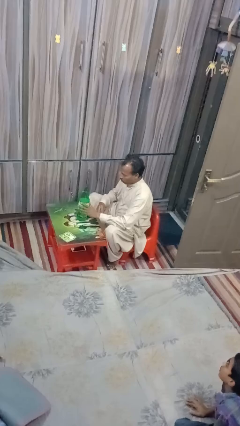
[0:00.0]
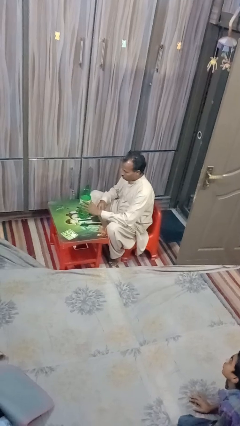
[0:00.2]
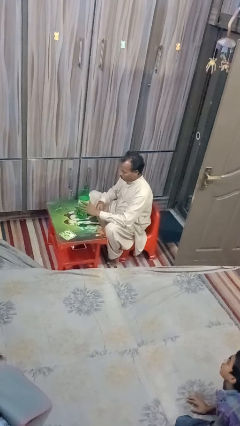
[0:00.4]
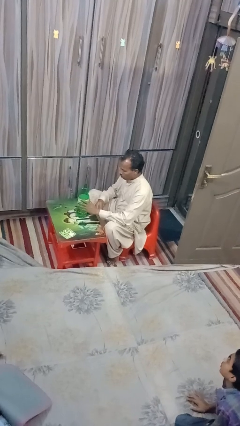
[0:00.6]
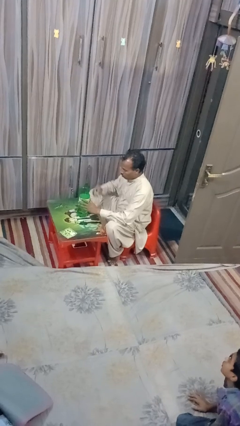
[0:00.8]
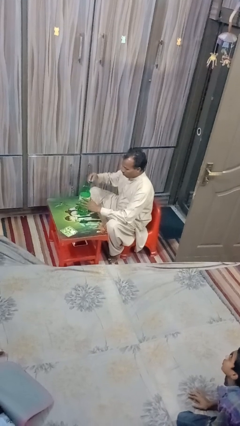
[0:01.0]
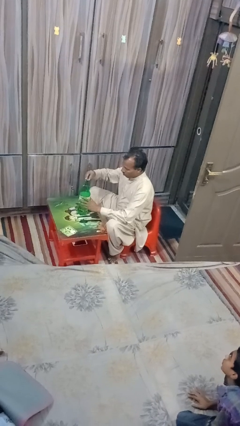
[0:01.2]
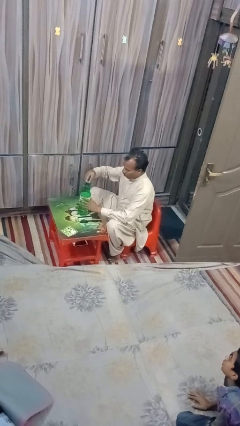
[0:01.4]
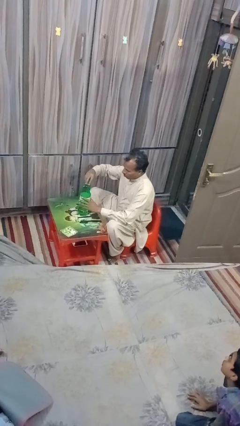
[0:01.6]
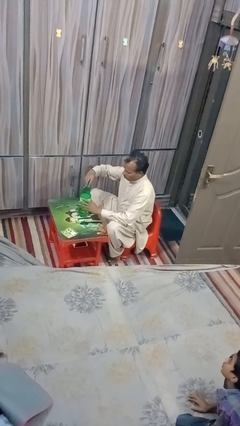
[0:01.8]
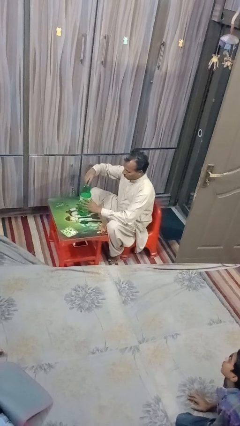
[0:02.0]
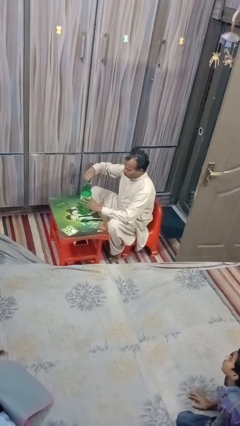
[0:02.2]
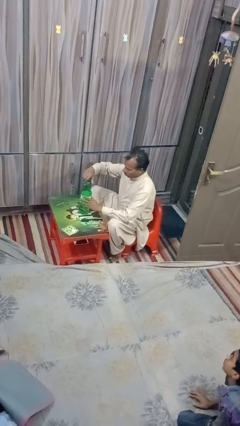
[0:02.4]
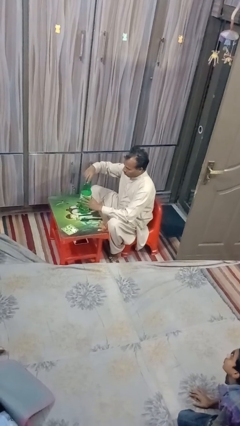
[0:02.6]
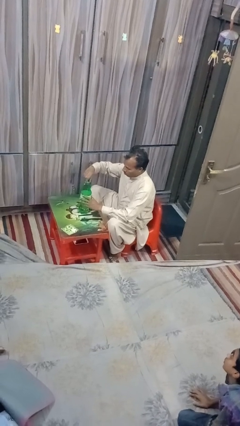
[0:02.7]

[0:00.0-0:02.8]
person screws lid to bottle

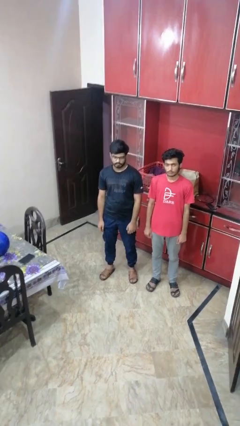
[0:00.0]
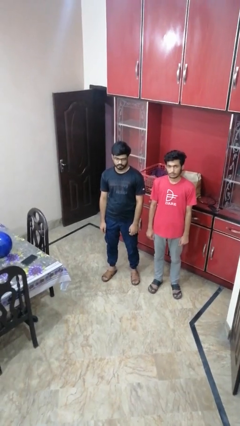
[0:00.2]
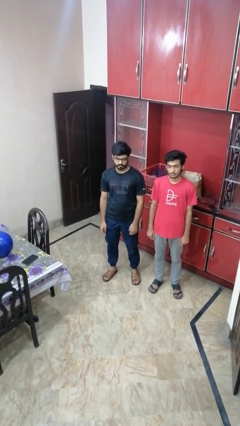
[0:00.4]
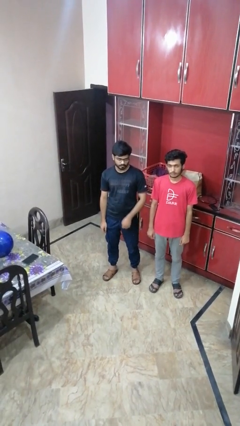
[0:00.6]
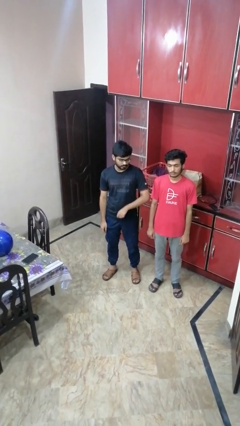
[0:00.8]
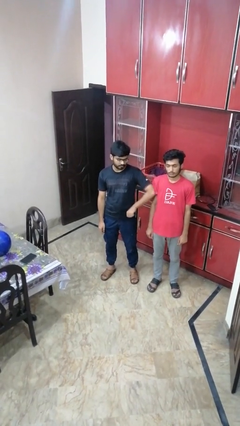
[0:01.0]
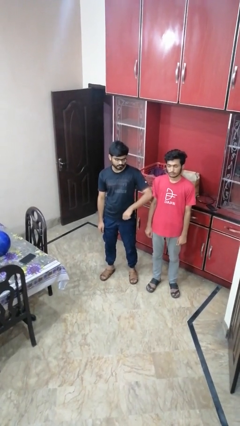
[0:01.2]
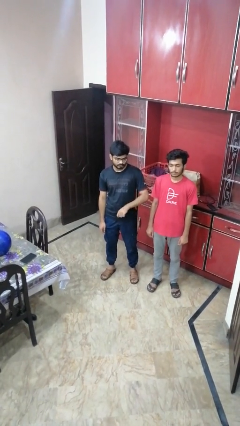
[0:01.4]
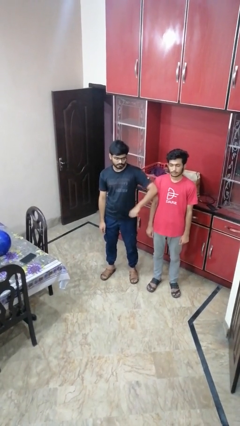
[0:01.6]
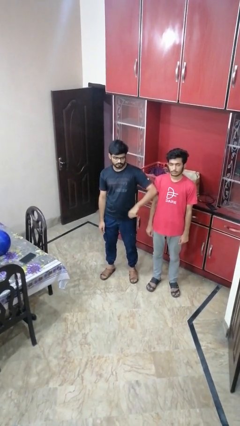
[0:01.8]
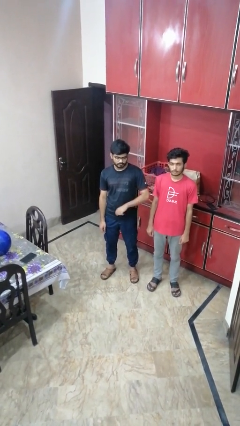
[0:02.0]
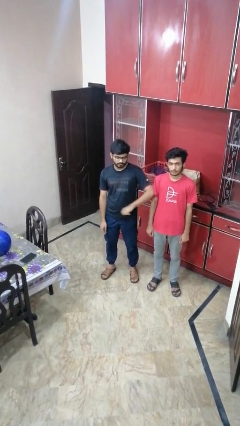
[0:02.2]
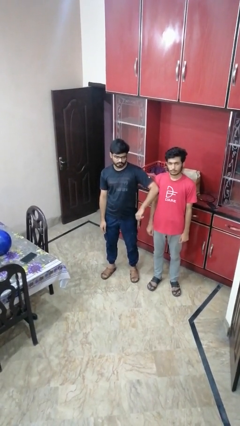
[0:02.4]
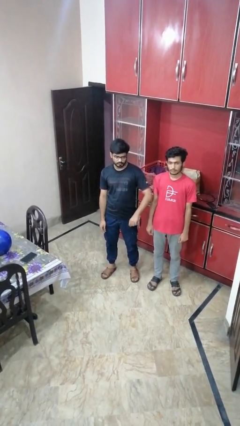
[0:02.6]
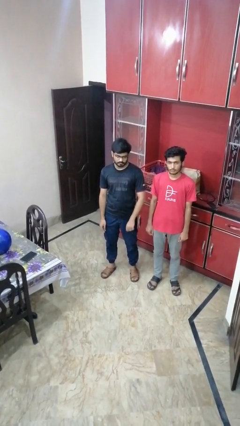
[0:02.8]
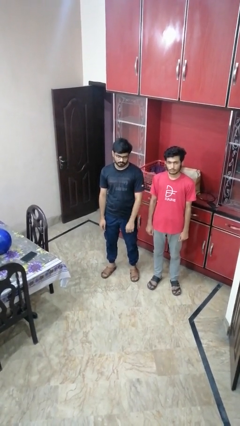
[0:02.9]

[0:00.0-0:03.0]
person nudges person with elbow

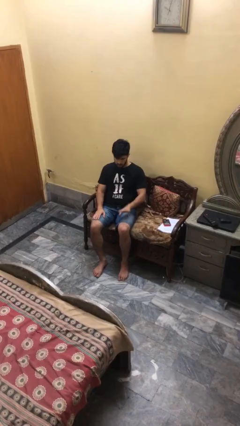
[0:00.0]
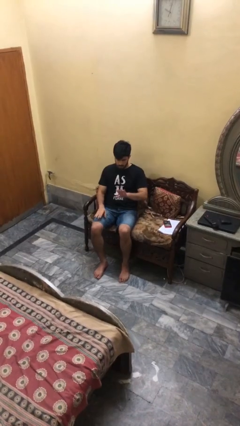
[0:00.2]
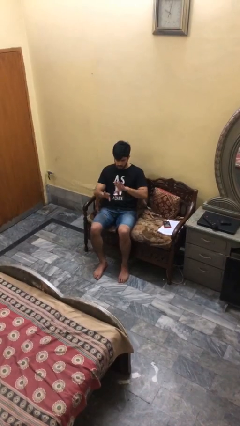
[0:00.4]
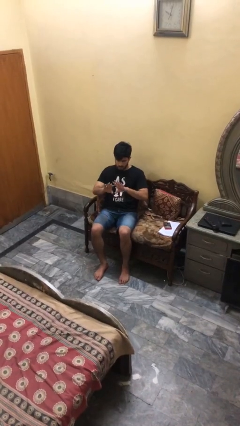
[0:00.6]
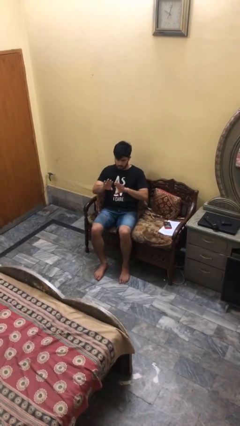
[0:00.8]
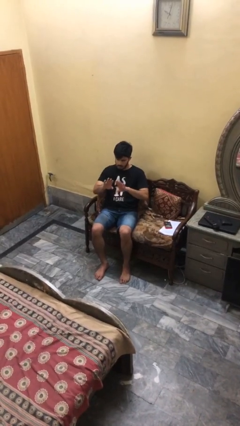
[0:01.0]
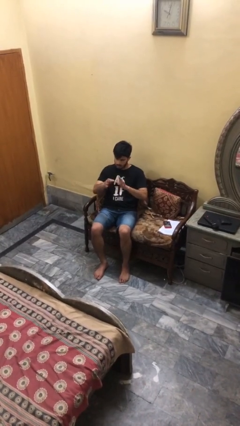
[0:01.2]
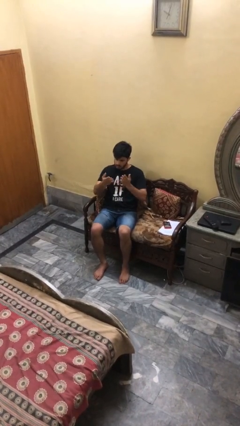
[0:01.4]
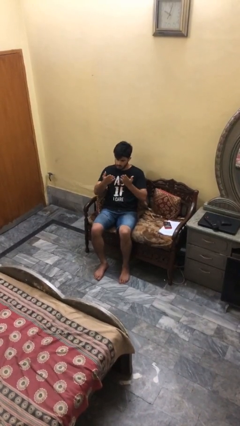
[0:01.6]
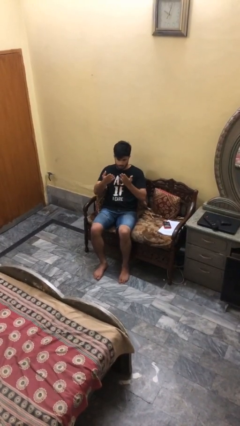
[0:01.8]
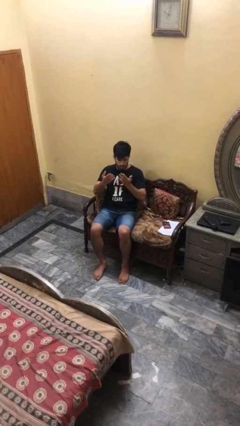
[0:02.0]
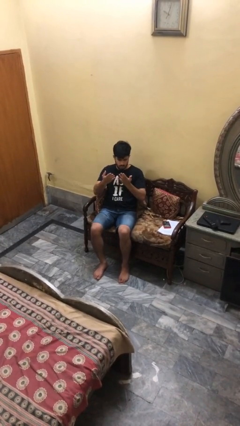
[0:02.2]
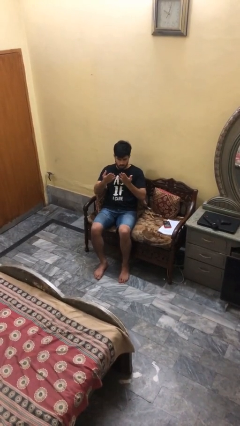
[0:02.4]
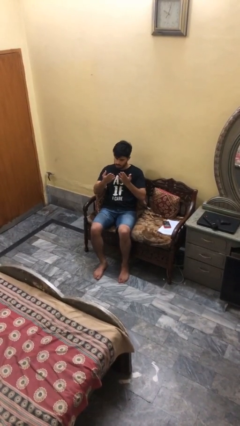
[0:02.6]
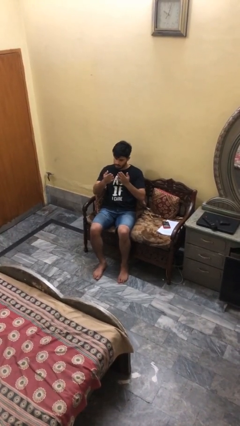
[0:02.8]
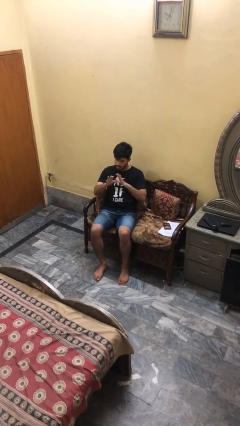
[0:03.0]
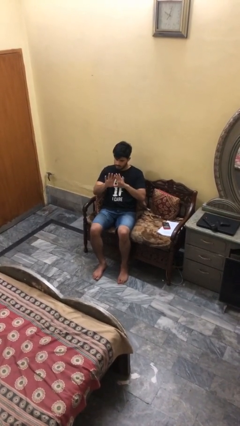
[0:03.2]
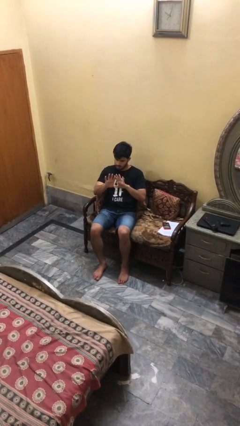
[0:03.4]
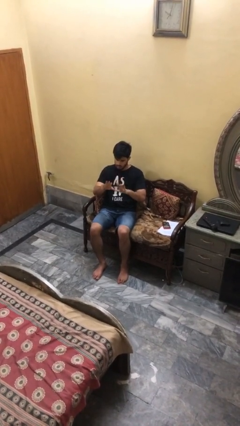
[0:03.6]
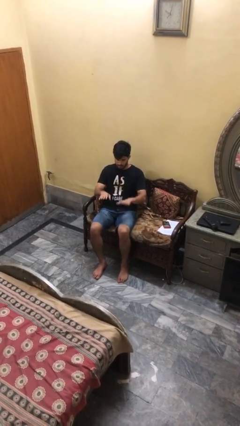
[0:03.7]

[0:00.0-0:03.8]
person looks at hands in lap

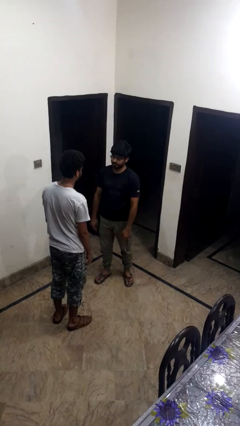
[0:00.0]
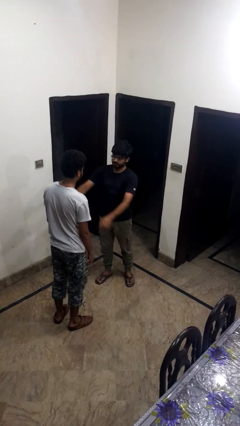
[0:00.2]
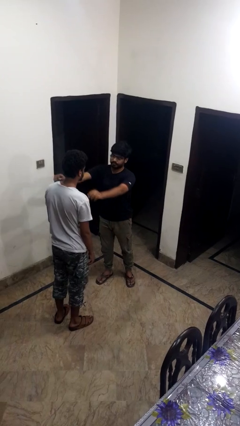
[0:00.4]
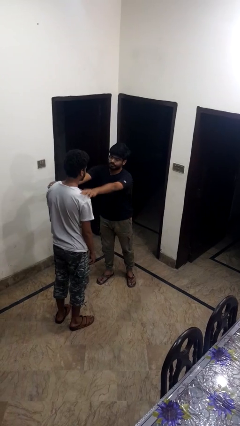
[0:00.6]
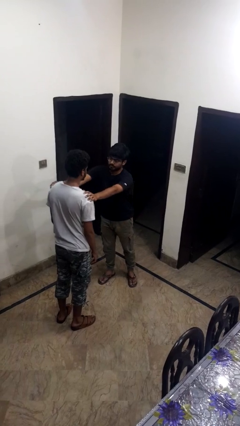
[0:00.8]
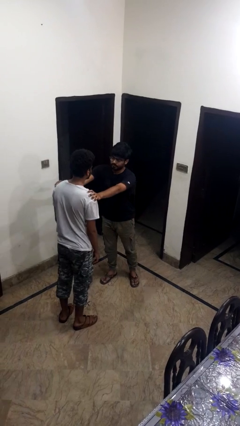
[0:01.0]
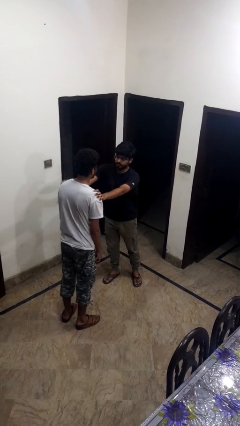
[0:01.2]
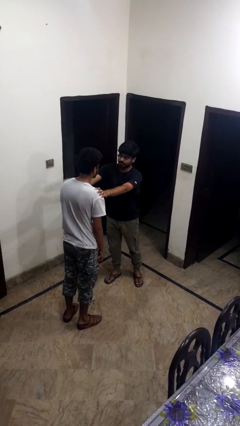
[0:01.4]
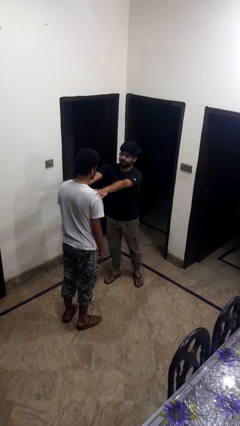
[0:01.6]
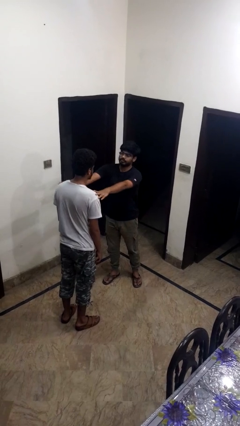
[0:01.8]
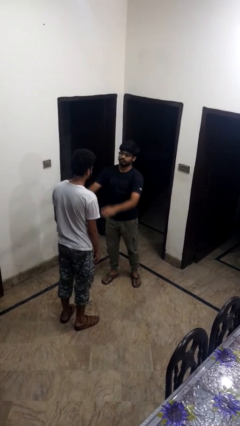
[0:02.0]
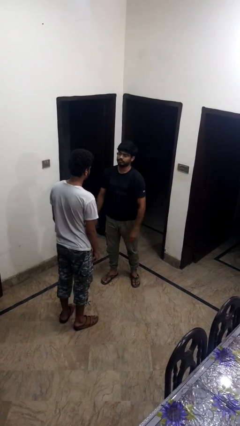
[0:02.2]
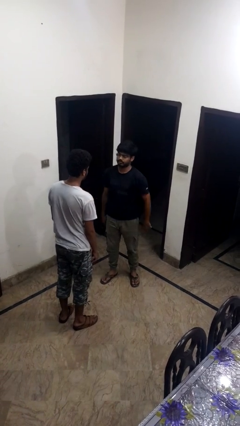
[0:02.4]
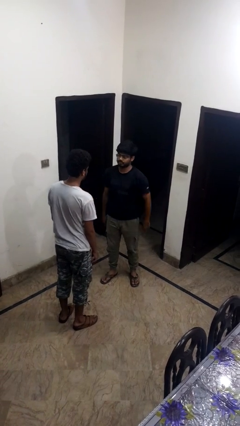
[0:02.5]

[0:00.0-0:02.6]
person kisses cheek of person

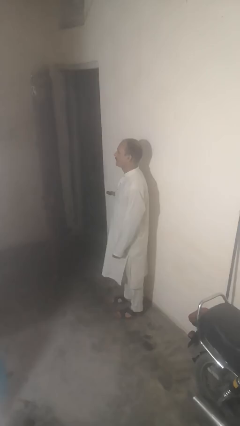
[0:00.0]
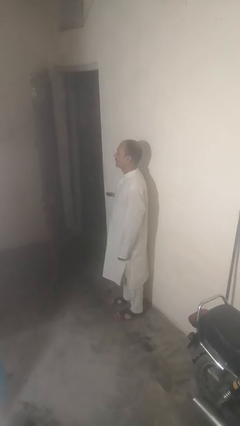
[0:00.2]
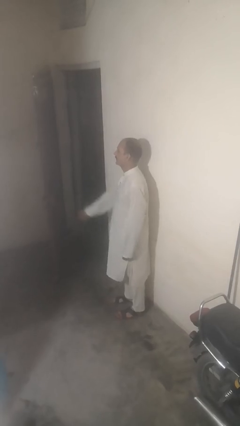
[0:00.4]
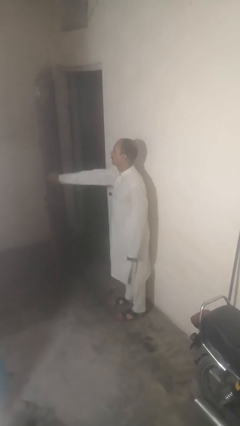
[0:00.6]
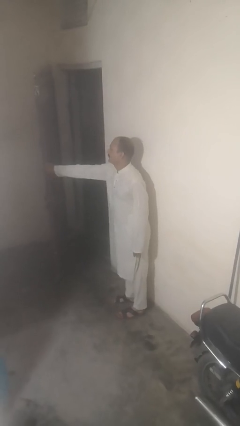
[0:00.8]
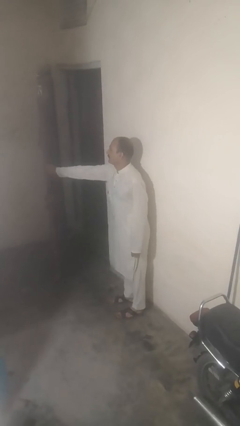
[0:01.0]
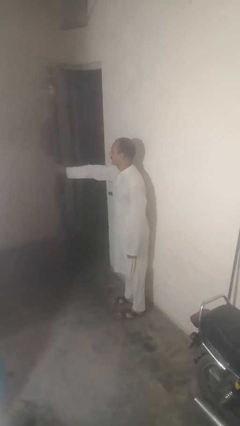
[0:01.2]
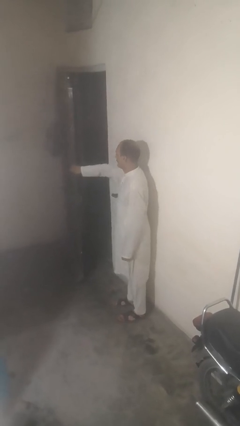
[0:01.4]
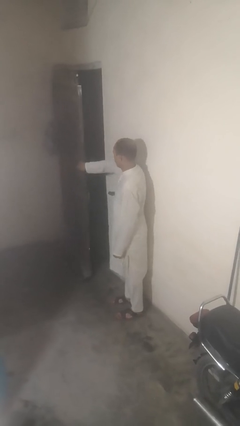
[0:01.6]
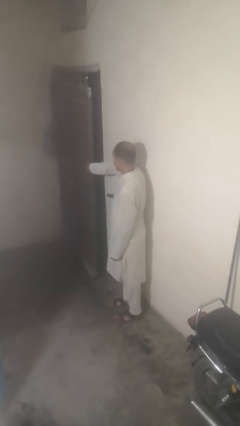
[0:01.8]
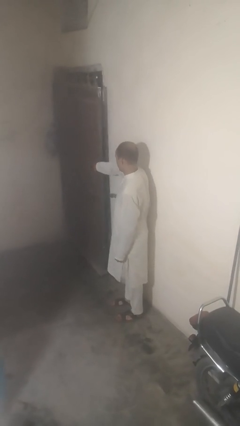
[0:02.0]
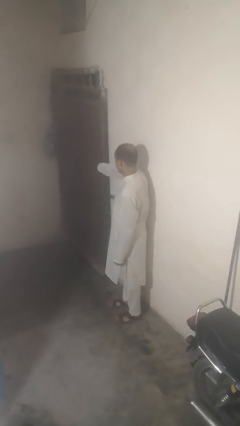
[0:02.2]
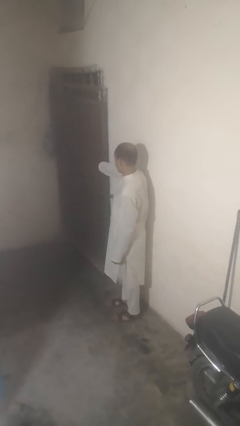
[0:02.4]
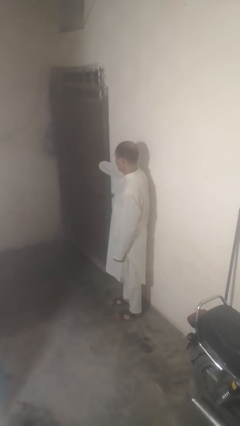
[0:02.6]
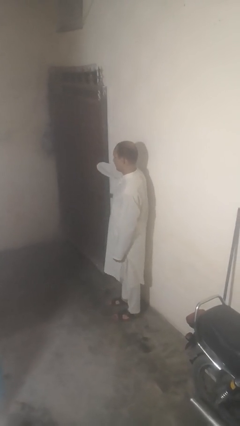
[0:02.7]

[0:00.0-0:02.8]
person closes gate

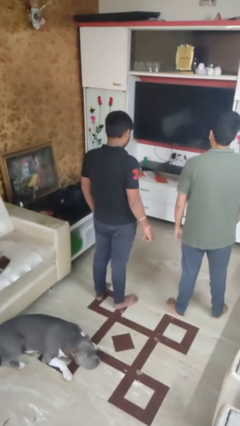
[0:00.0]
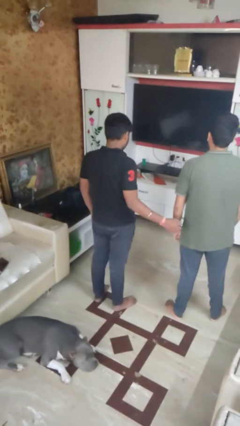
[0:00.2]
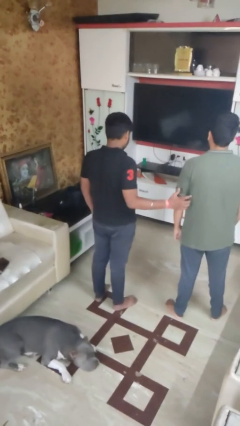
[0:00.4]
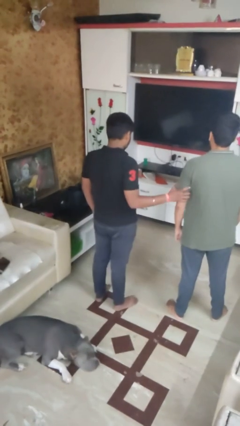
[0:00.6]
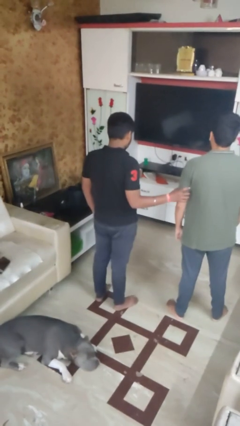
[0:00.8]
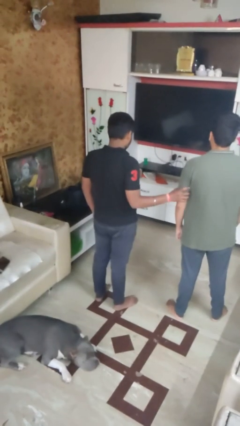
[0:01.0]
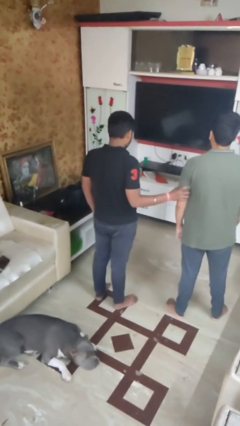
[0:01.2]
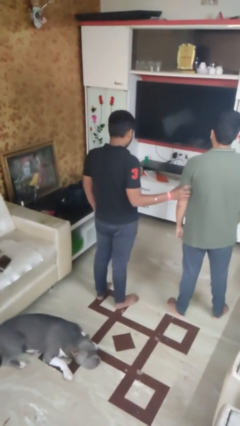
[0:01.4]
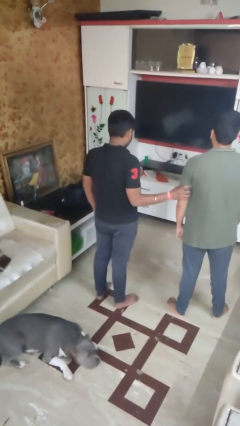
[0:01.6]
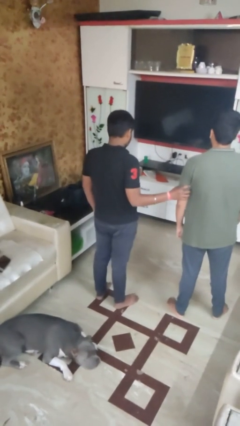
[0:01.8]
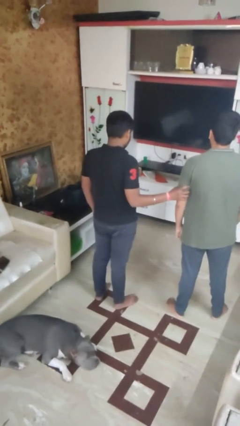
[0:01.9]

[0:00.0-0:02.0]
person grabs person by bicep

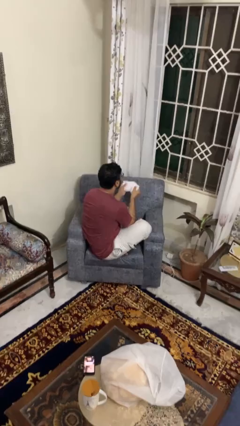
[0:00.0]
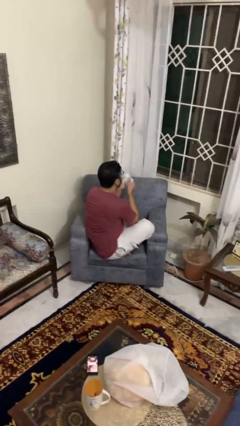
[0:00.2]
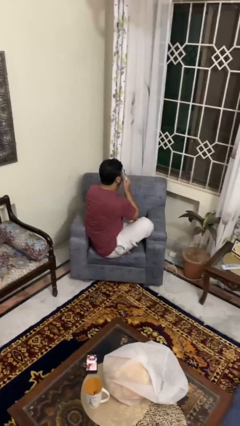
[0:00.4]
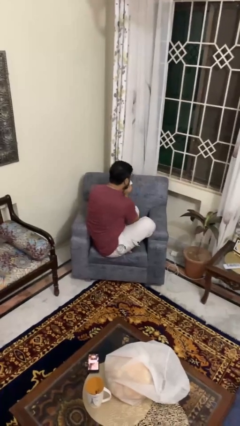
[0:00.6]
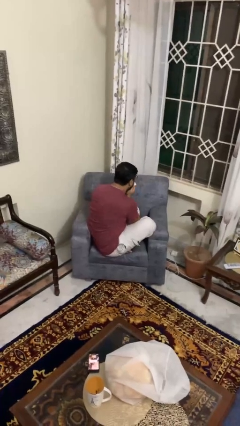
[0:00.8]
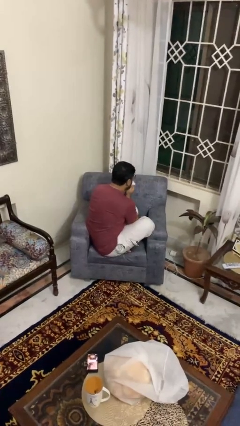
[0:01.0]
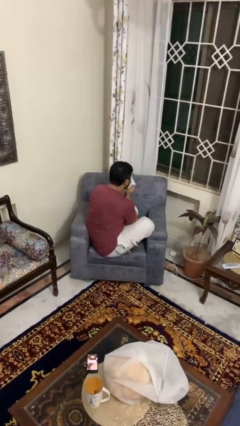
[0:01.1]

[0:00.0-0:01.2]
person blows nose
